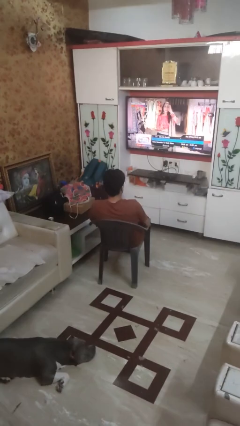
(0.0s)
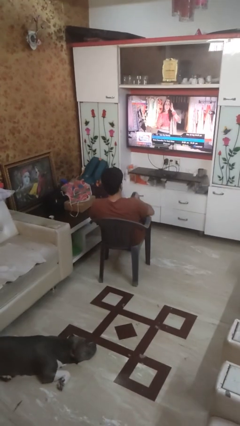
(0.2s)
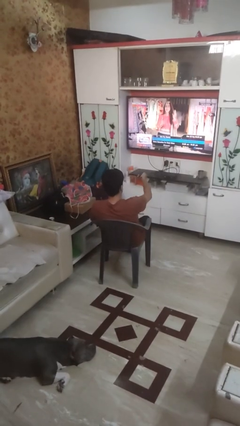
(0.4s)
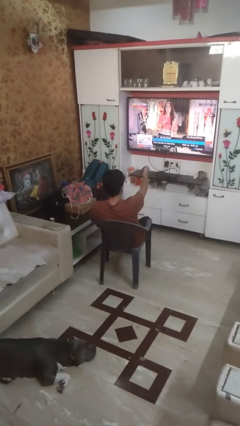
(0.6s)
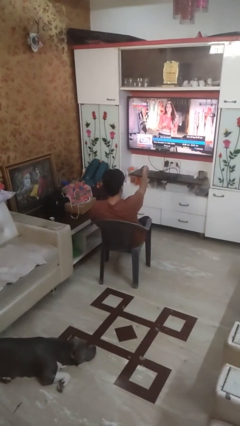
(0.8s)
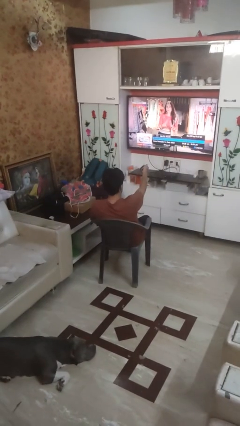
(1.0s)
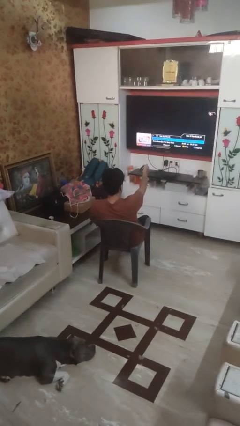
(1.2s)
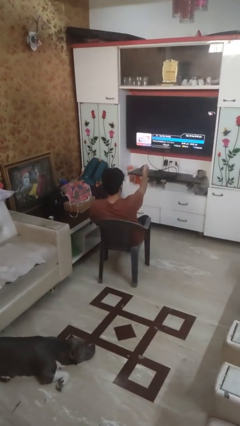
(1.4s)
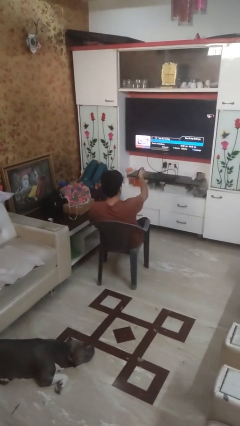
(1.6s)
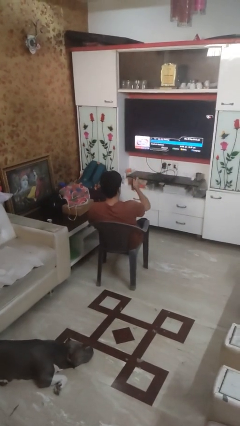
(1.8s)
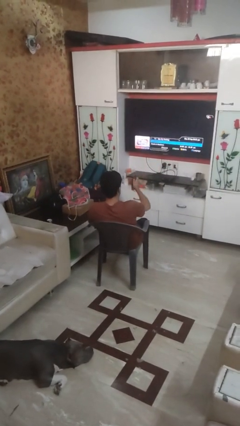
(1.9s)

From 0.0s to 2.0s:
person uses television remote

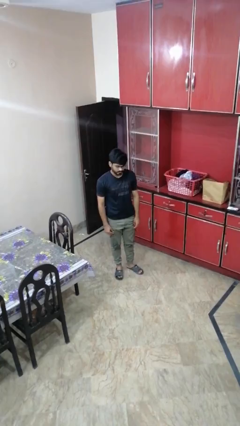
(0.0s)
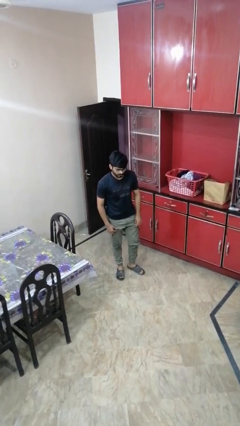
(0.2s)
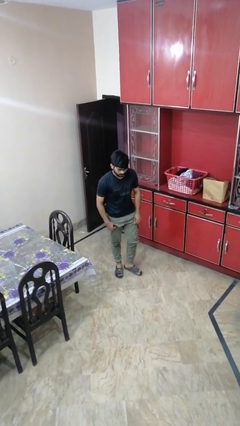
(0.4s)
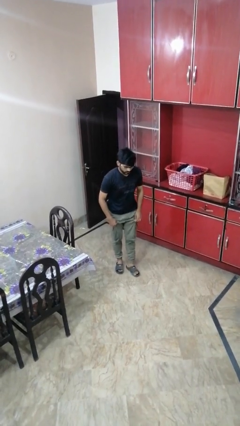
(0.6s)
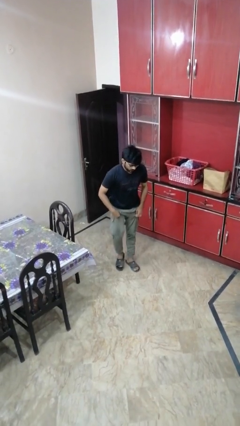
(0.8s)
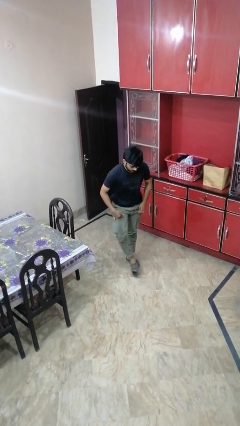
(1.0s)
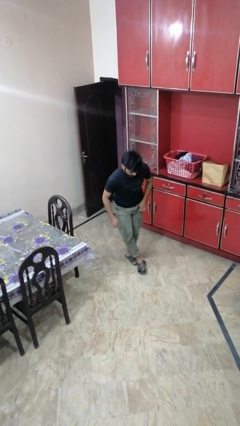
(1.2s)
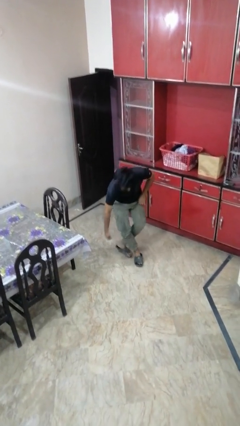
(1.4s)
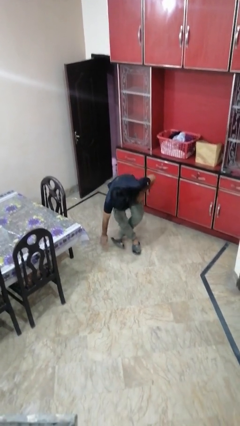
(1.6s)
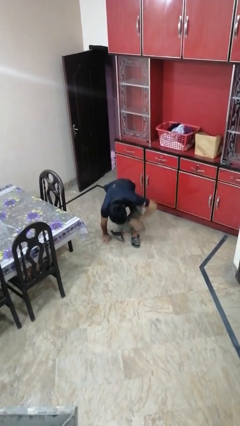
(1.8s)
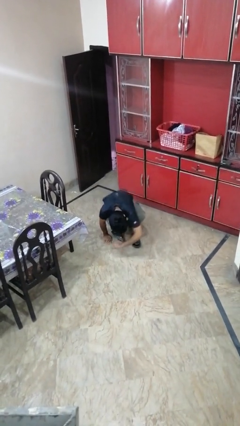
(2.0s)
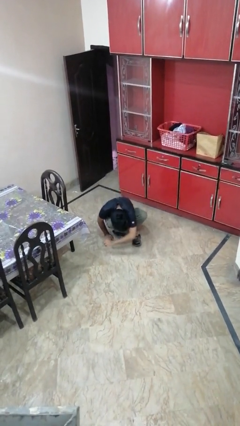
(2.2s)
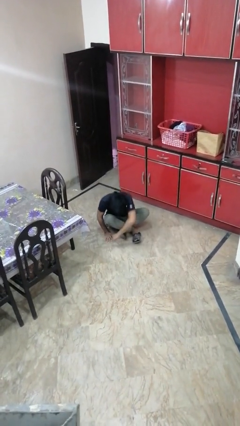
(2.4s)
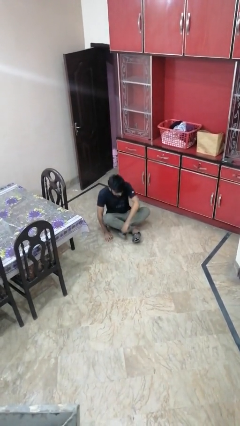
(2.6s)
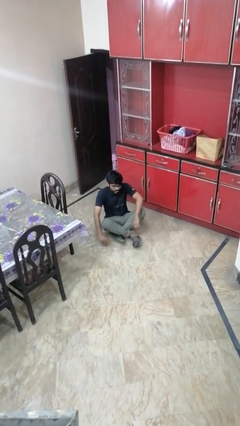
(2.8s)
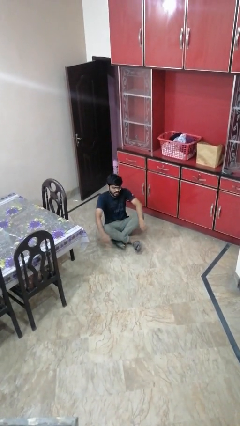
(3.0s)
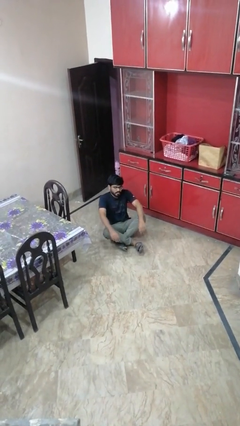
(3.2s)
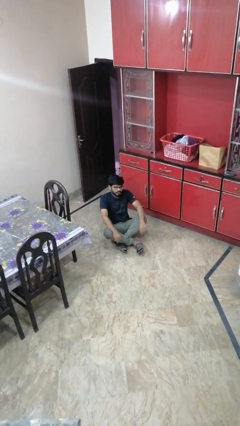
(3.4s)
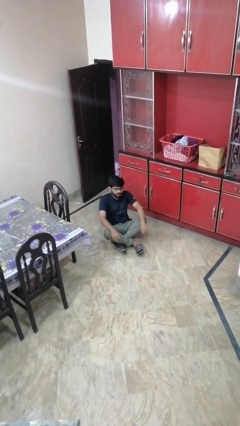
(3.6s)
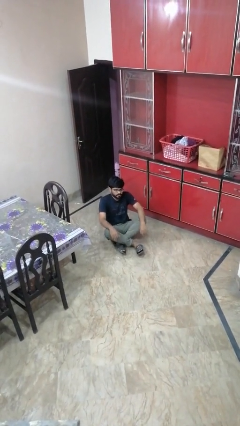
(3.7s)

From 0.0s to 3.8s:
person sits crisscross

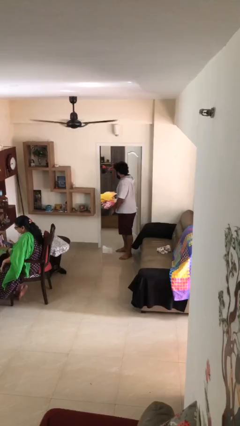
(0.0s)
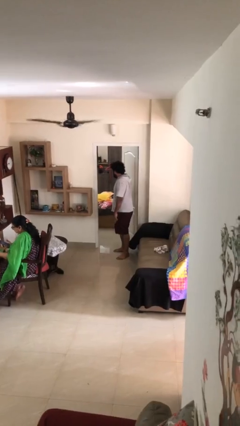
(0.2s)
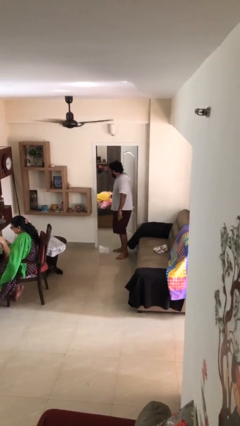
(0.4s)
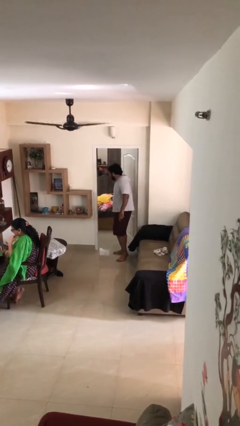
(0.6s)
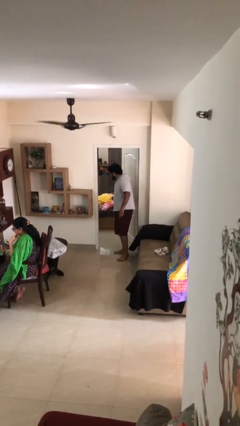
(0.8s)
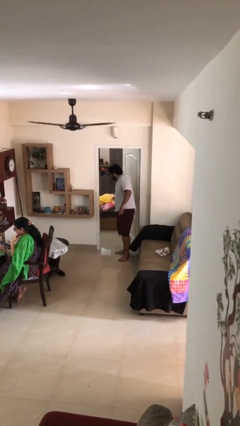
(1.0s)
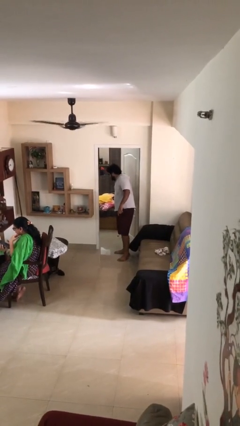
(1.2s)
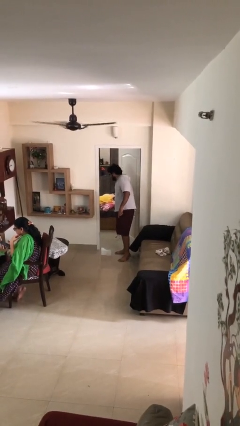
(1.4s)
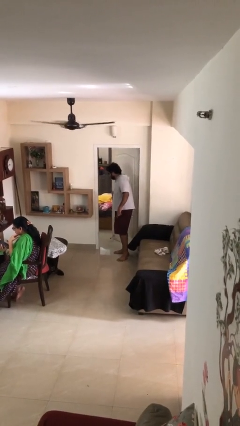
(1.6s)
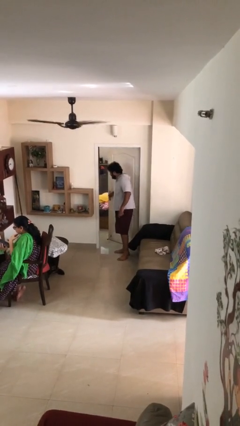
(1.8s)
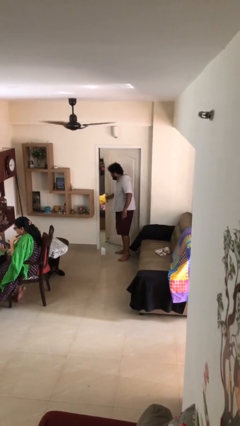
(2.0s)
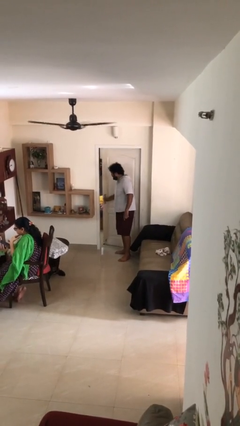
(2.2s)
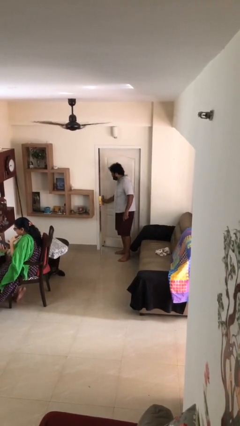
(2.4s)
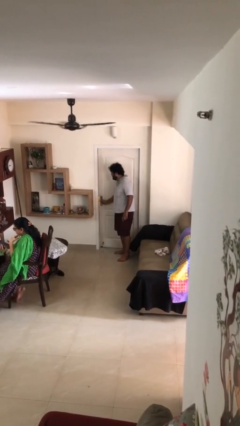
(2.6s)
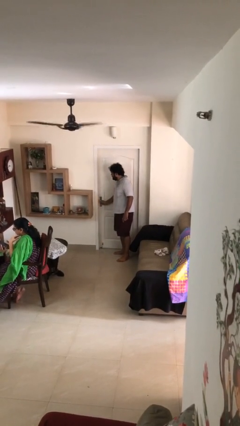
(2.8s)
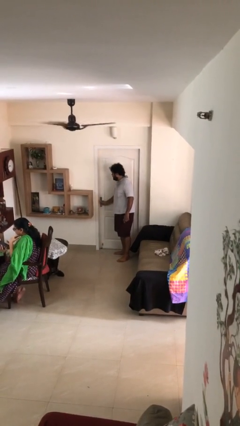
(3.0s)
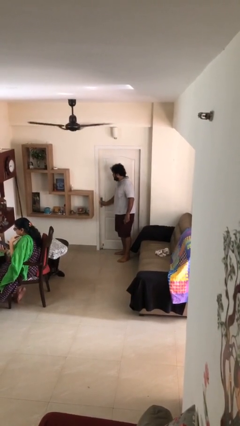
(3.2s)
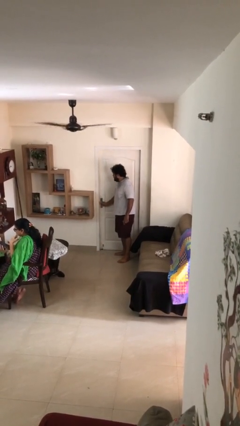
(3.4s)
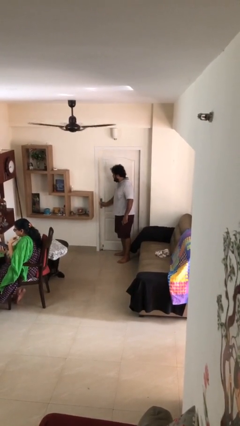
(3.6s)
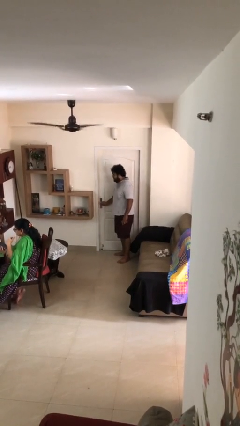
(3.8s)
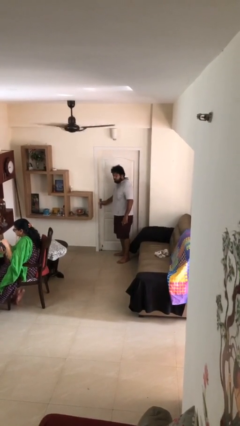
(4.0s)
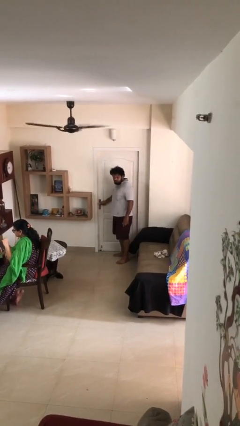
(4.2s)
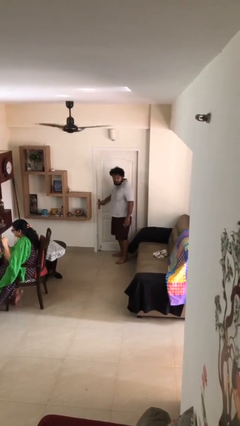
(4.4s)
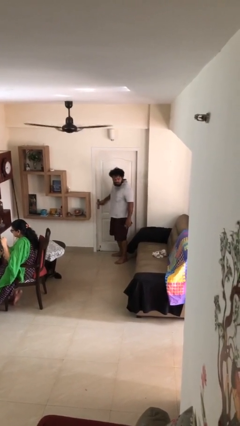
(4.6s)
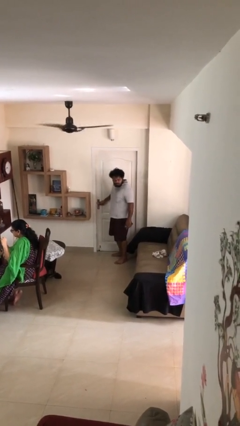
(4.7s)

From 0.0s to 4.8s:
person closes facility door

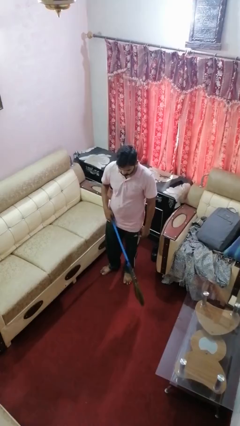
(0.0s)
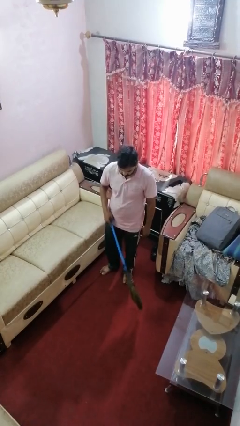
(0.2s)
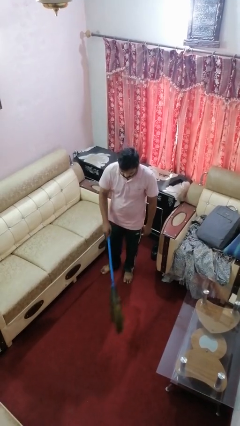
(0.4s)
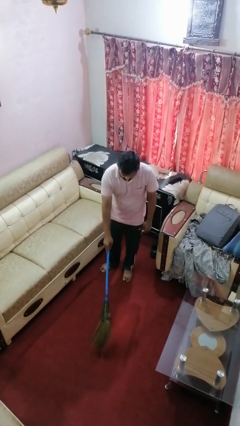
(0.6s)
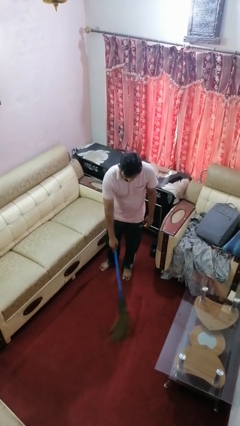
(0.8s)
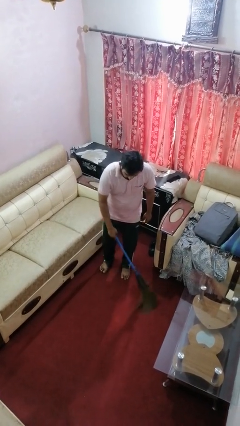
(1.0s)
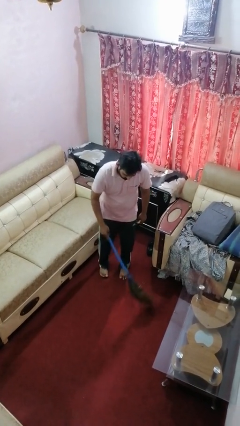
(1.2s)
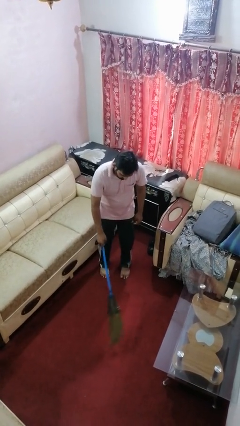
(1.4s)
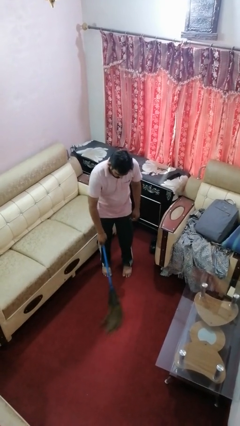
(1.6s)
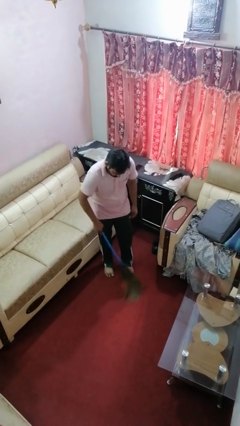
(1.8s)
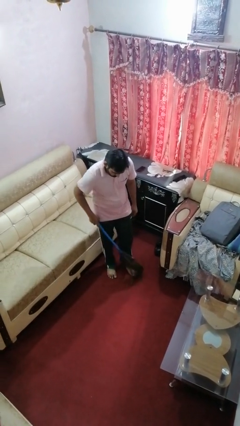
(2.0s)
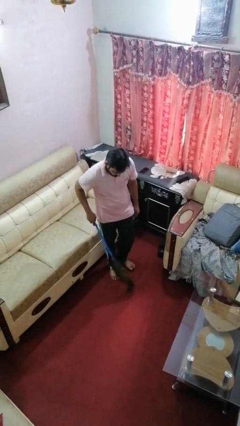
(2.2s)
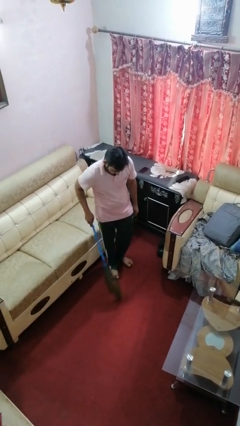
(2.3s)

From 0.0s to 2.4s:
person sweeps floor

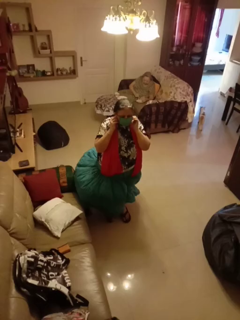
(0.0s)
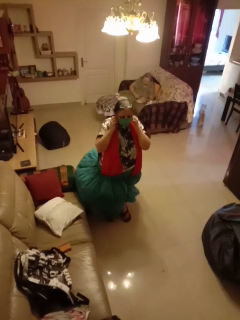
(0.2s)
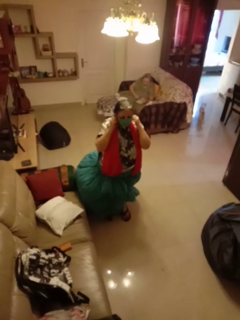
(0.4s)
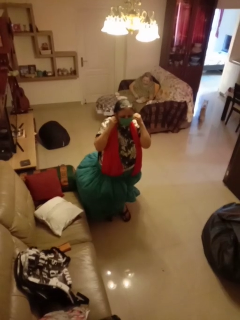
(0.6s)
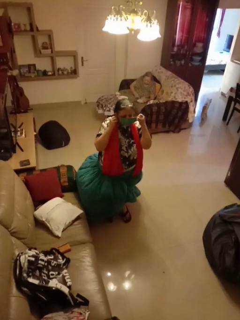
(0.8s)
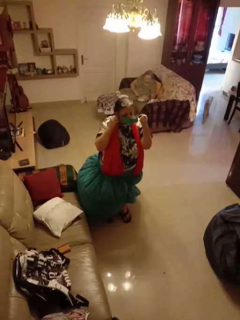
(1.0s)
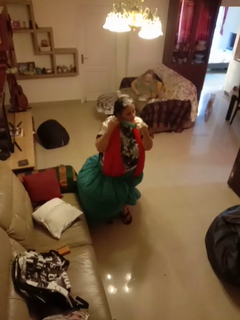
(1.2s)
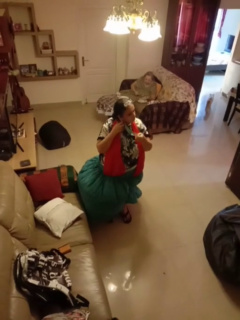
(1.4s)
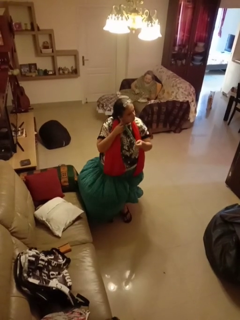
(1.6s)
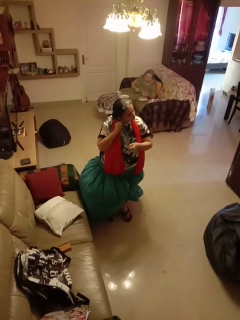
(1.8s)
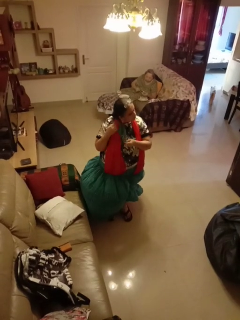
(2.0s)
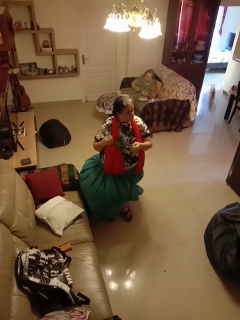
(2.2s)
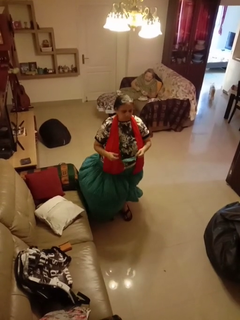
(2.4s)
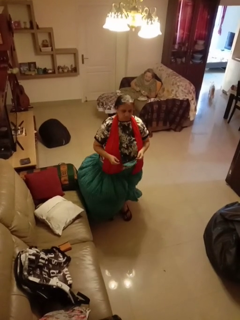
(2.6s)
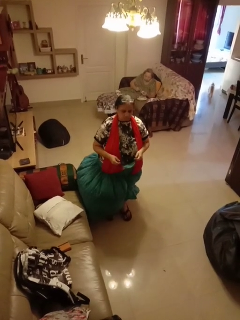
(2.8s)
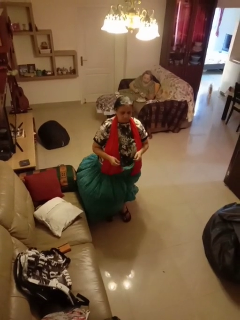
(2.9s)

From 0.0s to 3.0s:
person takes off facemask

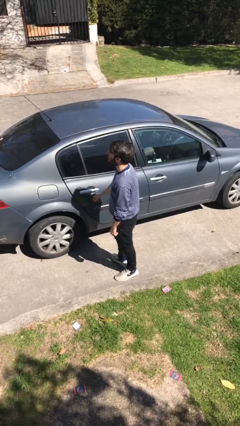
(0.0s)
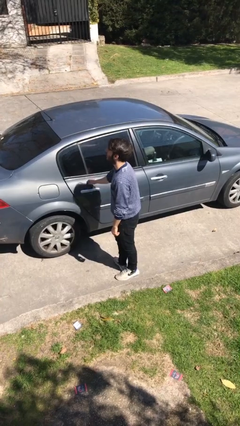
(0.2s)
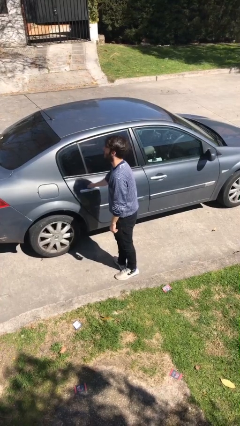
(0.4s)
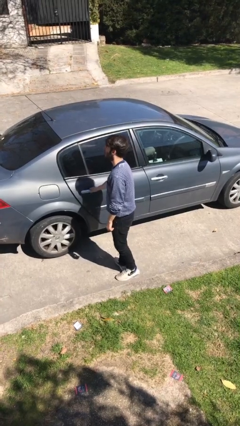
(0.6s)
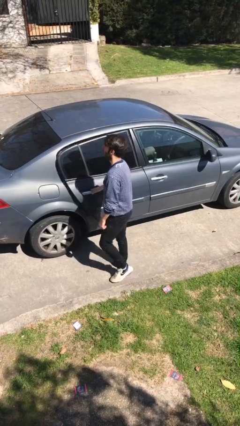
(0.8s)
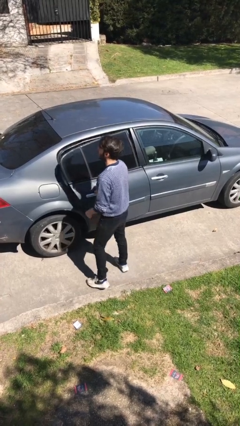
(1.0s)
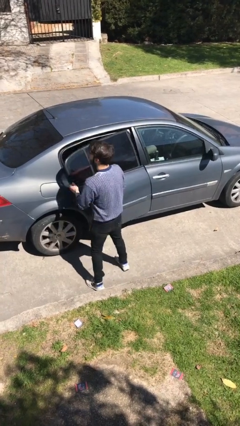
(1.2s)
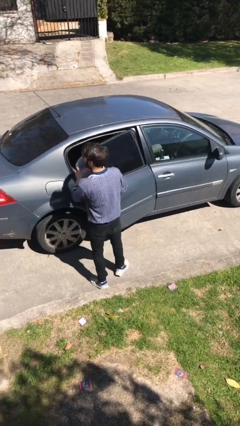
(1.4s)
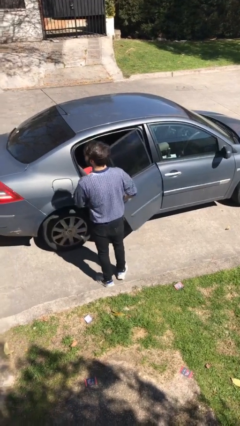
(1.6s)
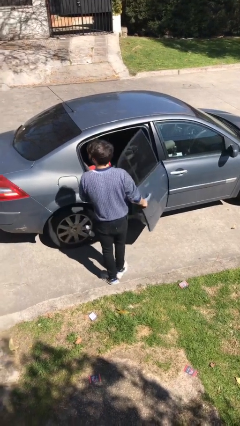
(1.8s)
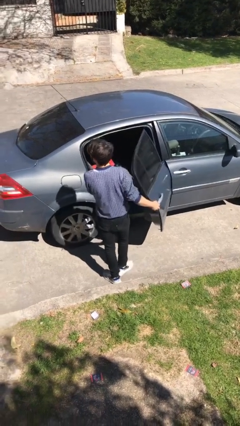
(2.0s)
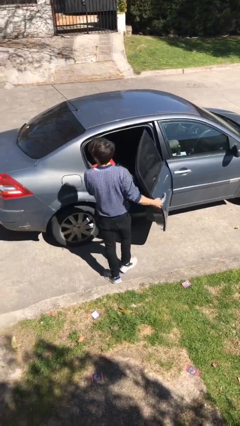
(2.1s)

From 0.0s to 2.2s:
person opens car door
